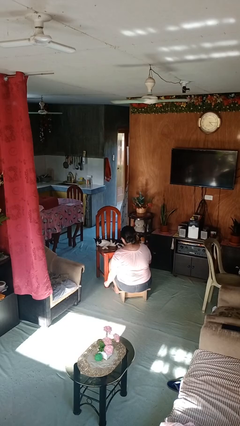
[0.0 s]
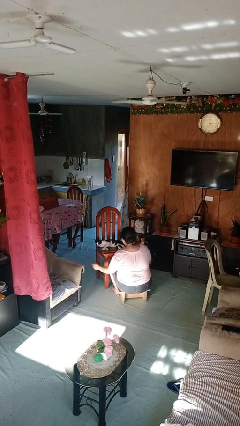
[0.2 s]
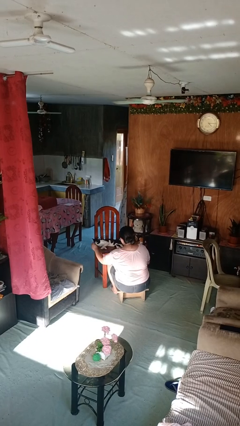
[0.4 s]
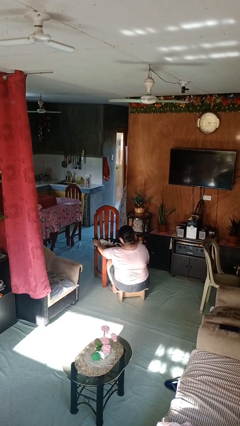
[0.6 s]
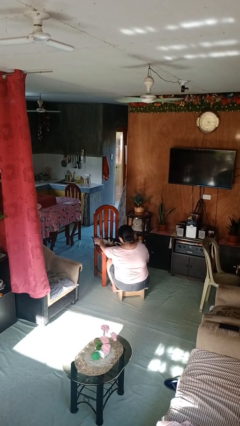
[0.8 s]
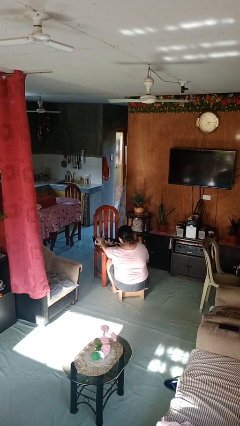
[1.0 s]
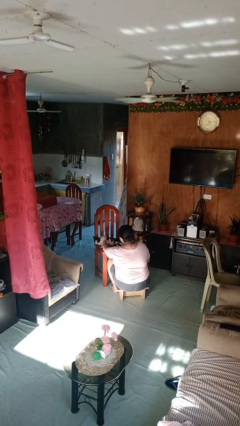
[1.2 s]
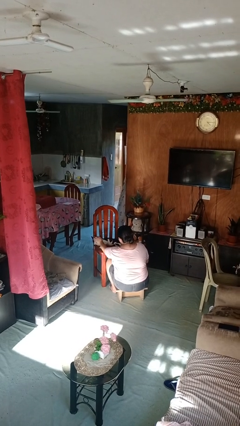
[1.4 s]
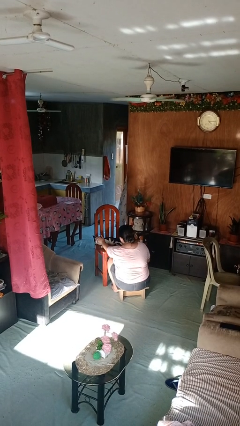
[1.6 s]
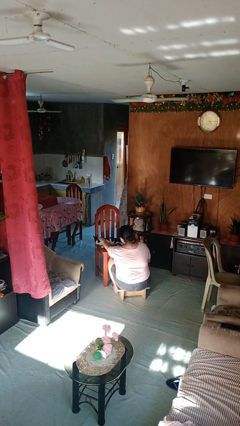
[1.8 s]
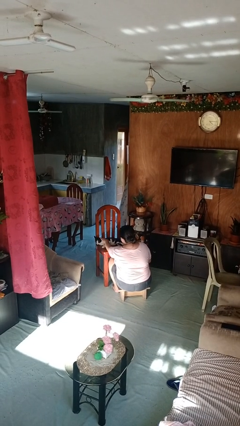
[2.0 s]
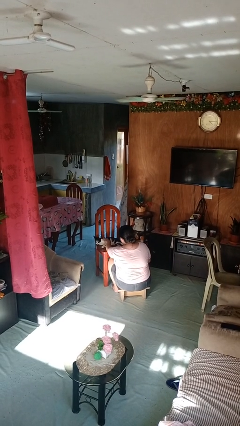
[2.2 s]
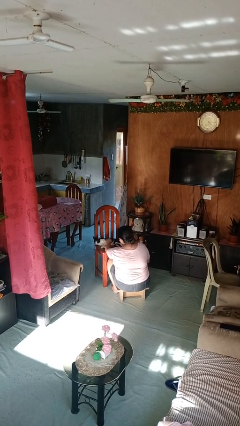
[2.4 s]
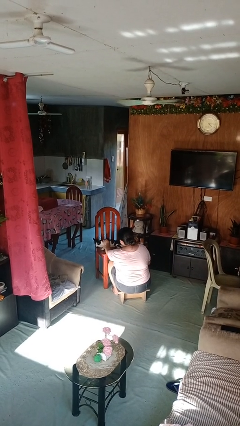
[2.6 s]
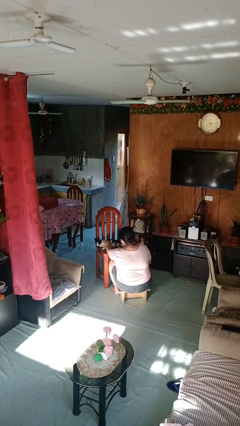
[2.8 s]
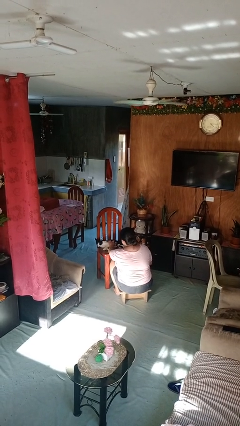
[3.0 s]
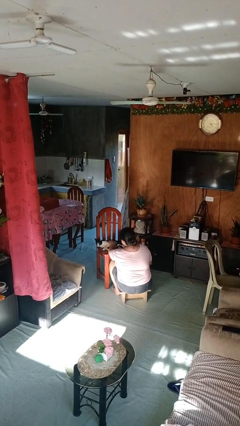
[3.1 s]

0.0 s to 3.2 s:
person pets cat

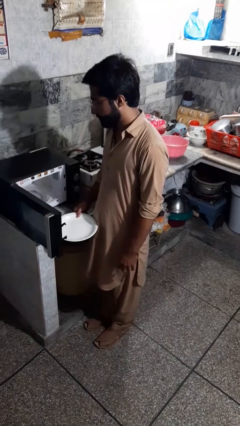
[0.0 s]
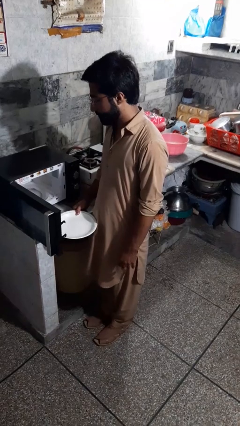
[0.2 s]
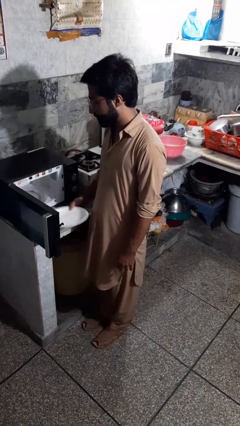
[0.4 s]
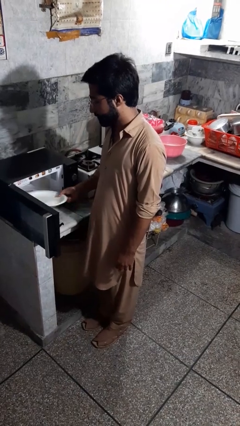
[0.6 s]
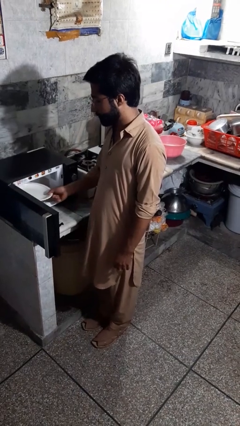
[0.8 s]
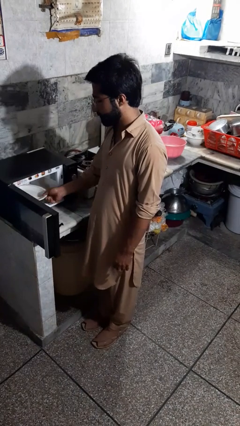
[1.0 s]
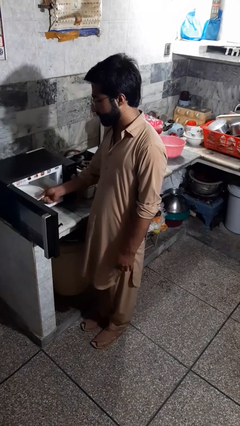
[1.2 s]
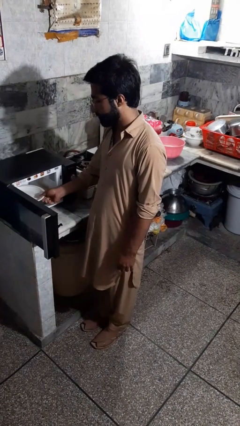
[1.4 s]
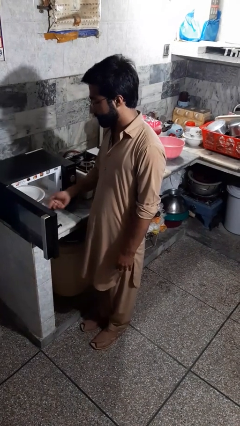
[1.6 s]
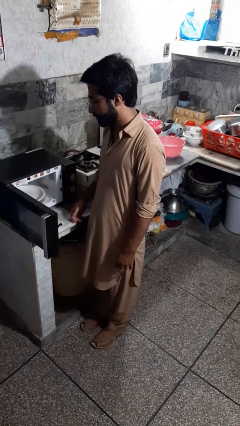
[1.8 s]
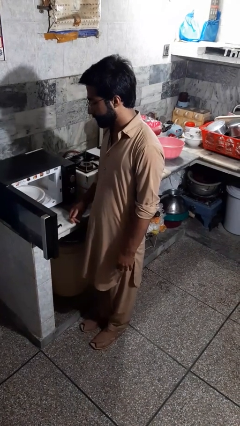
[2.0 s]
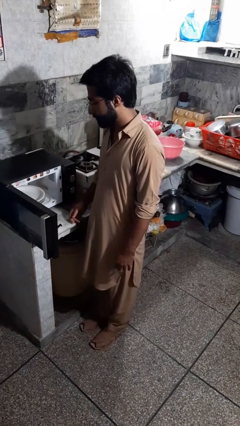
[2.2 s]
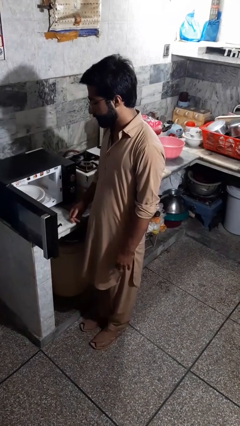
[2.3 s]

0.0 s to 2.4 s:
person puts object into oven

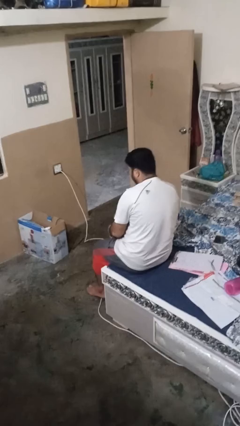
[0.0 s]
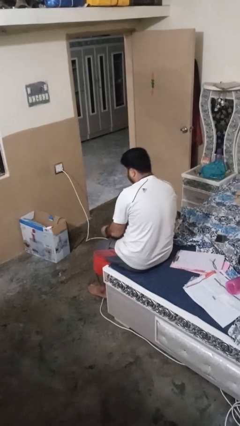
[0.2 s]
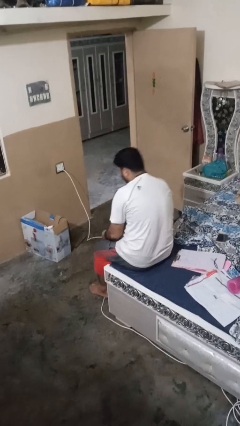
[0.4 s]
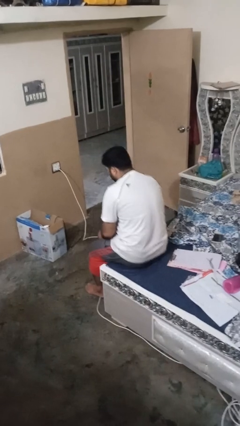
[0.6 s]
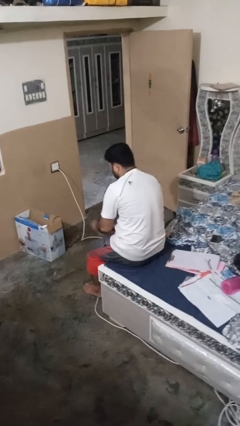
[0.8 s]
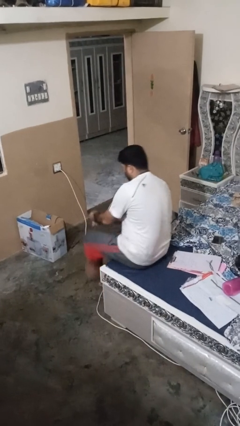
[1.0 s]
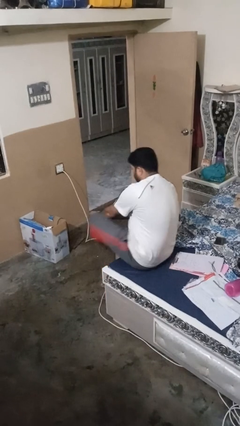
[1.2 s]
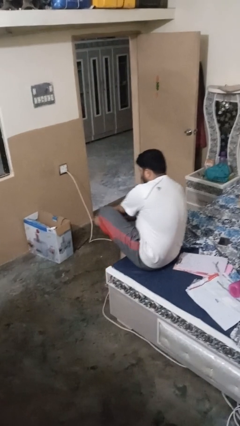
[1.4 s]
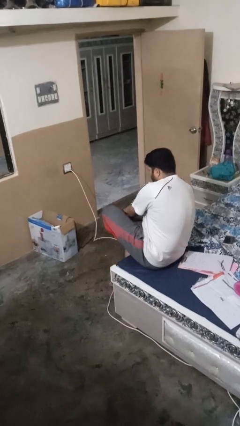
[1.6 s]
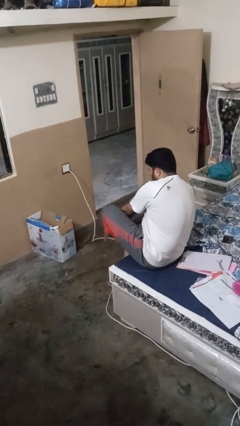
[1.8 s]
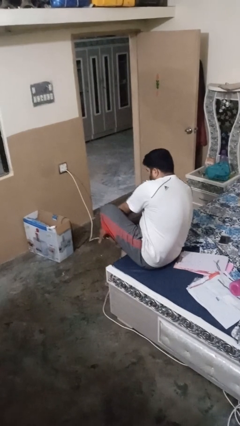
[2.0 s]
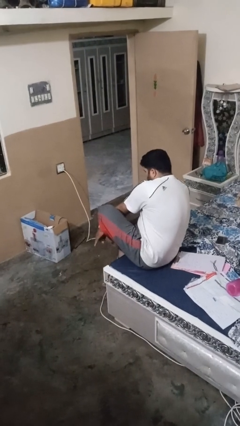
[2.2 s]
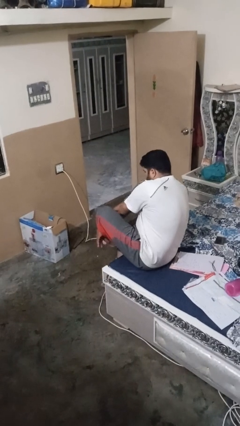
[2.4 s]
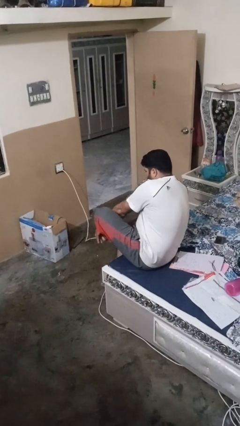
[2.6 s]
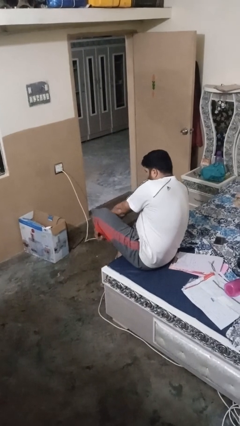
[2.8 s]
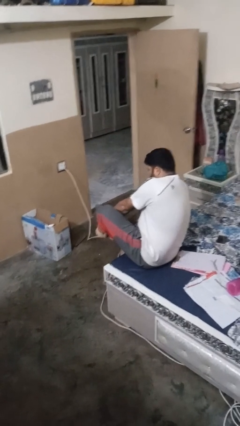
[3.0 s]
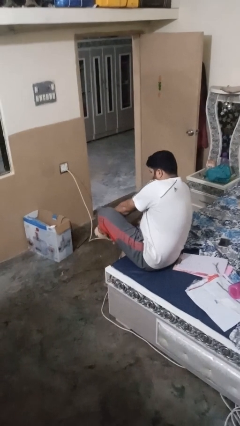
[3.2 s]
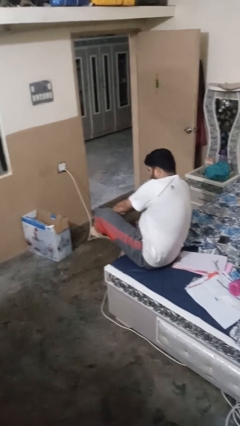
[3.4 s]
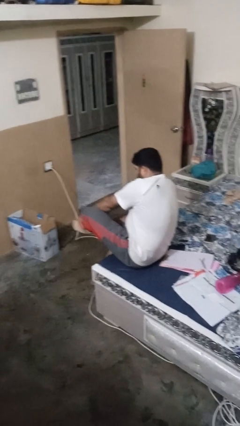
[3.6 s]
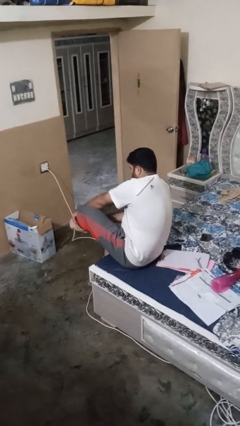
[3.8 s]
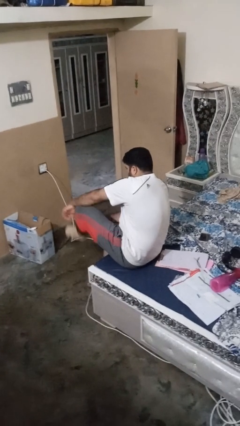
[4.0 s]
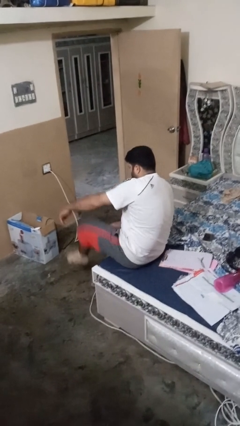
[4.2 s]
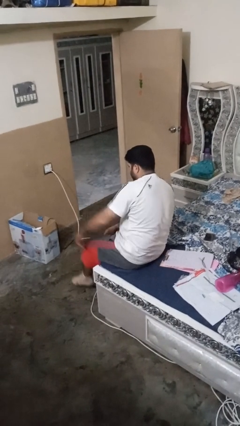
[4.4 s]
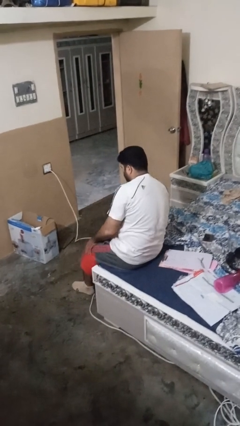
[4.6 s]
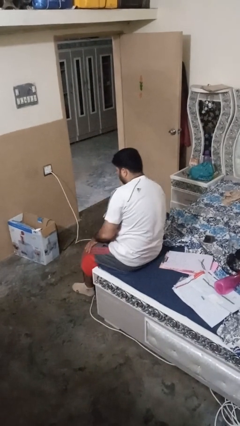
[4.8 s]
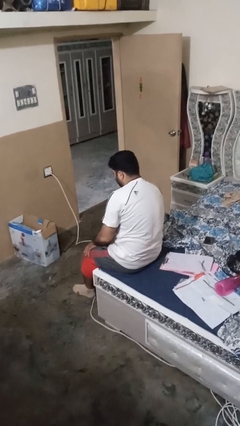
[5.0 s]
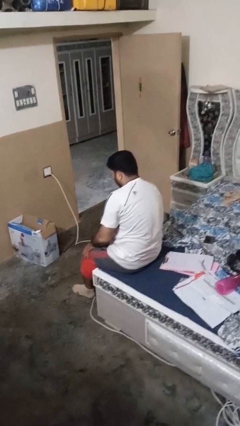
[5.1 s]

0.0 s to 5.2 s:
person puts on socks

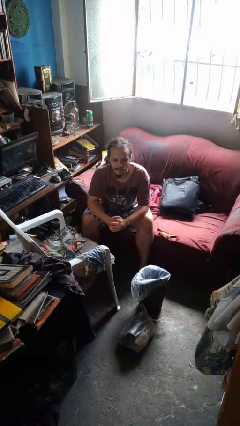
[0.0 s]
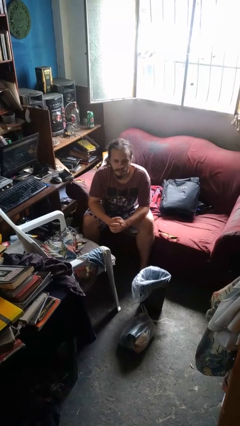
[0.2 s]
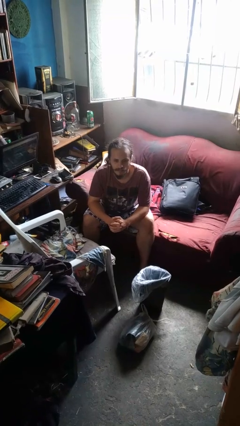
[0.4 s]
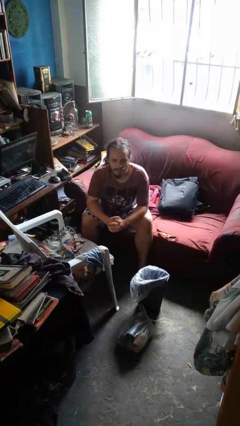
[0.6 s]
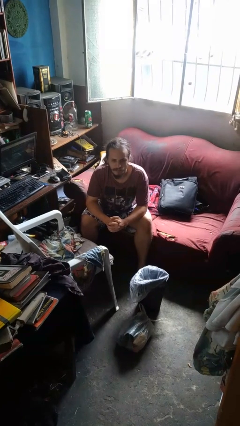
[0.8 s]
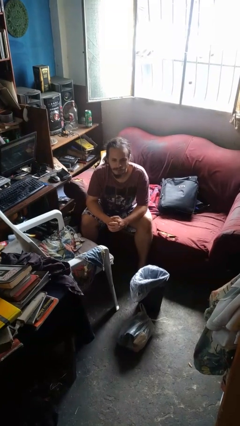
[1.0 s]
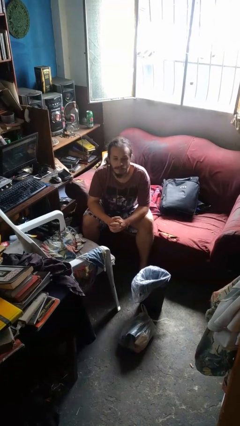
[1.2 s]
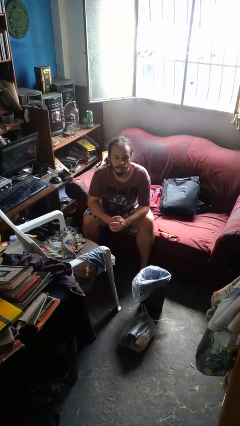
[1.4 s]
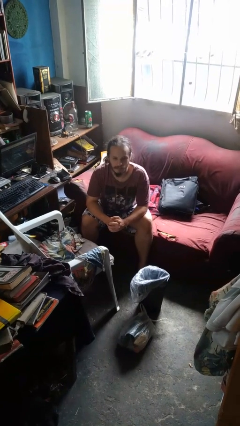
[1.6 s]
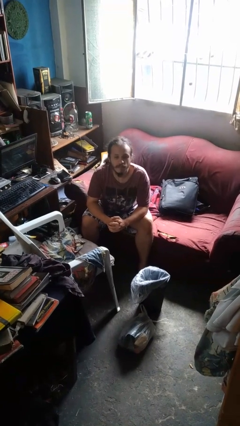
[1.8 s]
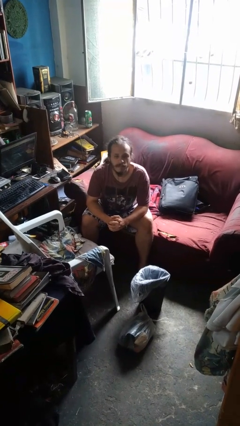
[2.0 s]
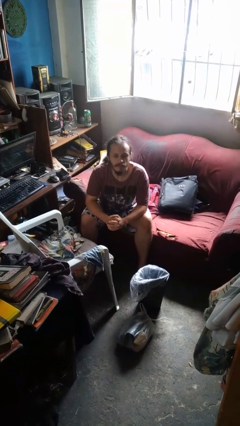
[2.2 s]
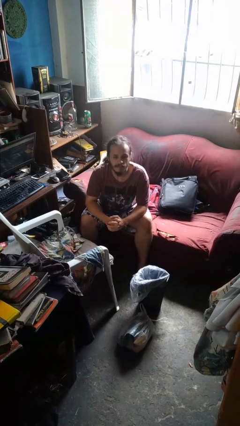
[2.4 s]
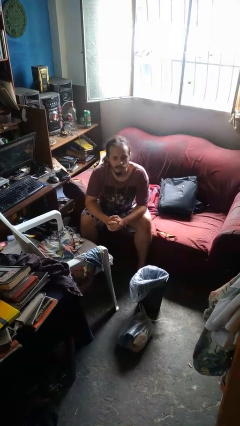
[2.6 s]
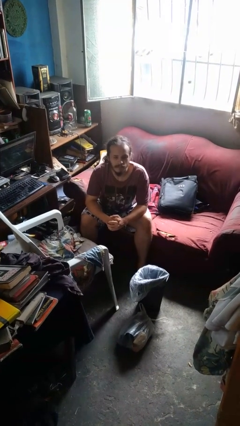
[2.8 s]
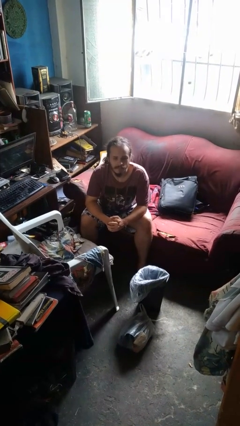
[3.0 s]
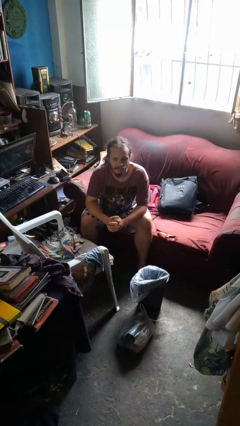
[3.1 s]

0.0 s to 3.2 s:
person nods head

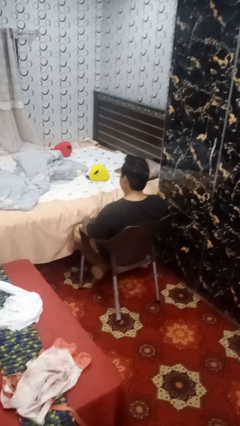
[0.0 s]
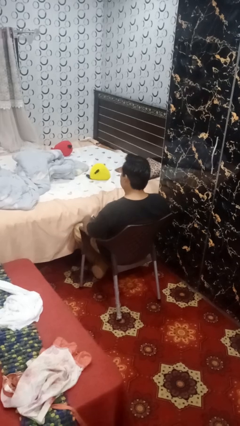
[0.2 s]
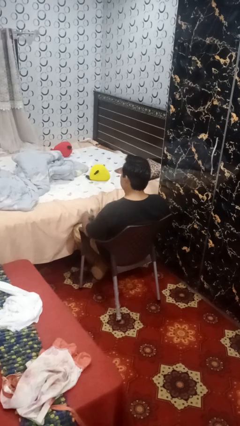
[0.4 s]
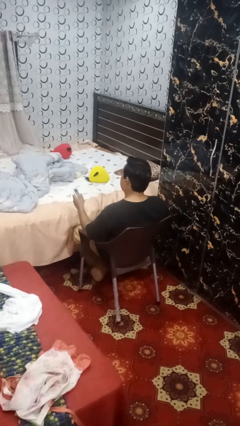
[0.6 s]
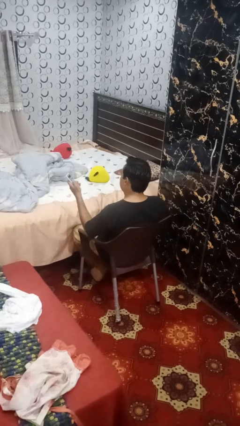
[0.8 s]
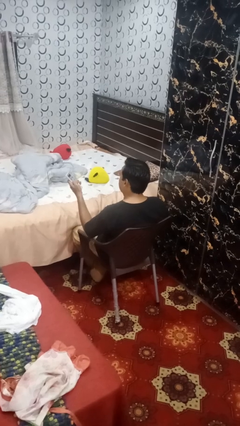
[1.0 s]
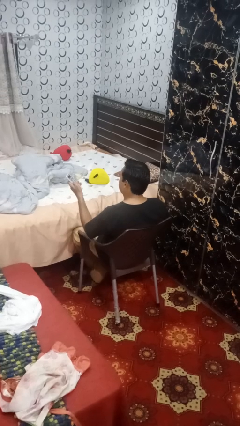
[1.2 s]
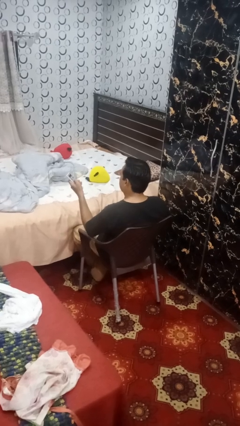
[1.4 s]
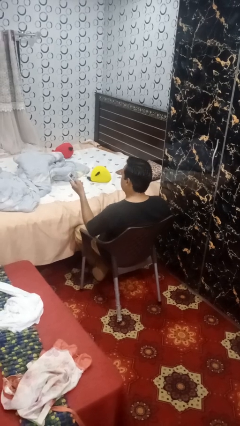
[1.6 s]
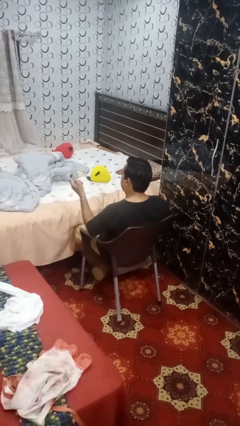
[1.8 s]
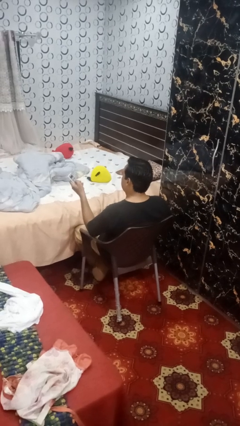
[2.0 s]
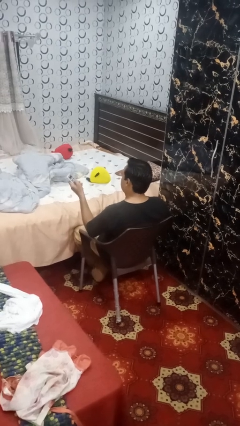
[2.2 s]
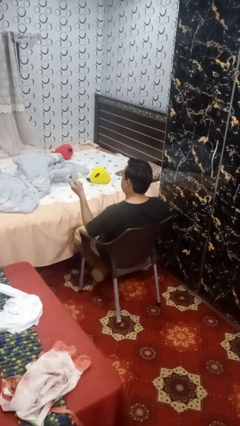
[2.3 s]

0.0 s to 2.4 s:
person uses television remote

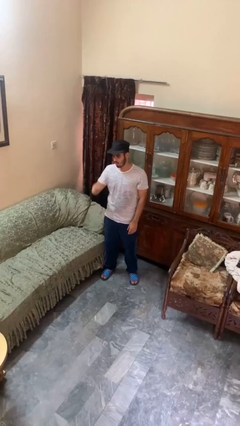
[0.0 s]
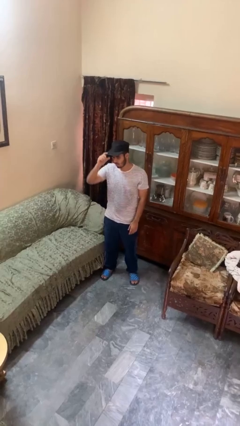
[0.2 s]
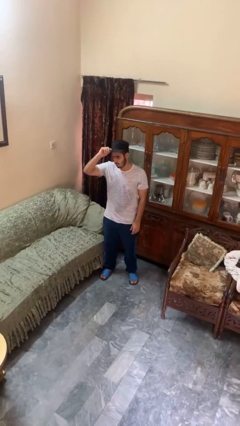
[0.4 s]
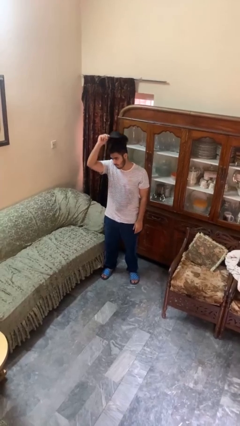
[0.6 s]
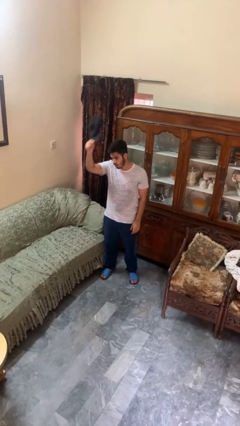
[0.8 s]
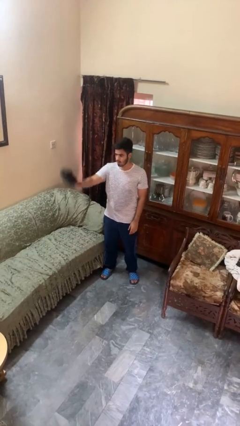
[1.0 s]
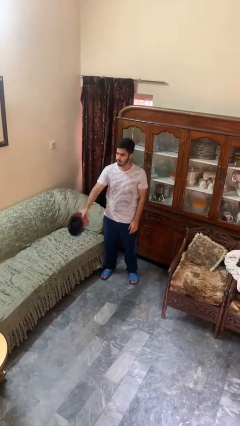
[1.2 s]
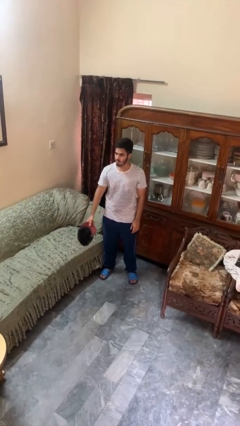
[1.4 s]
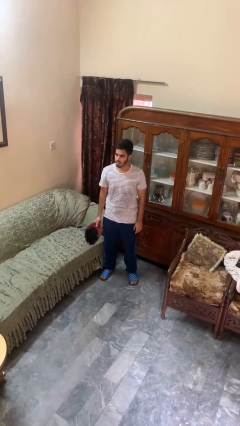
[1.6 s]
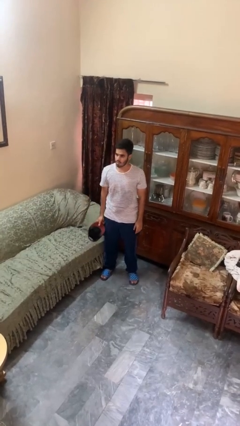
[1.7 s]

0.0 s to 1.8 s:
person takes off hat
